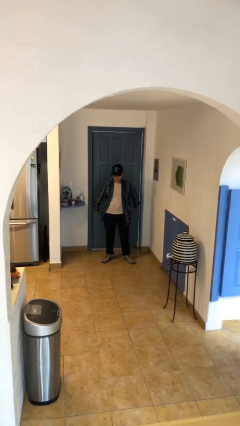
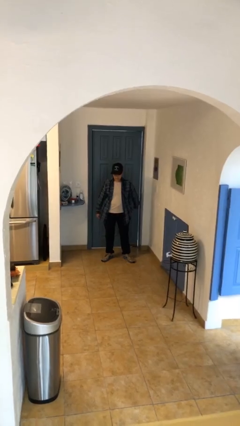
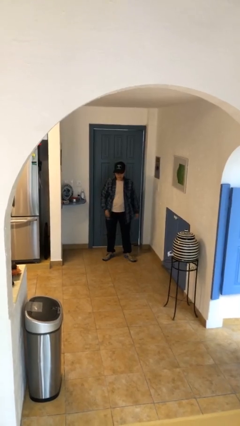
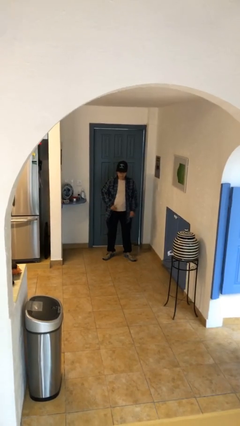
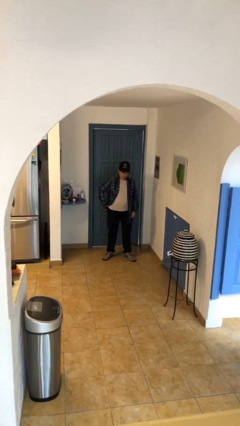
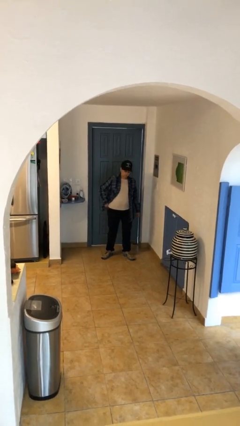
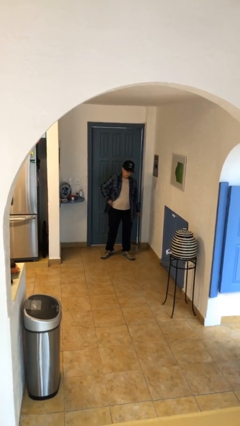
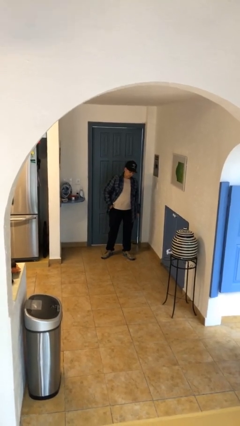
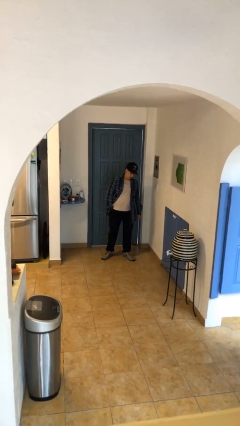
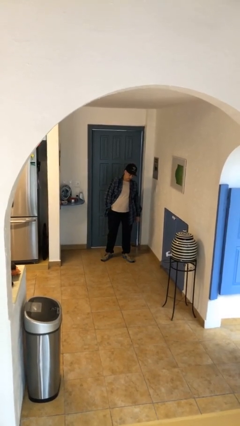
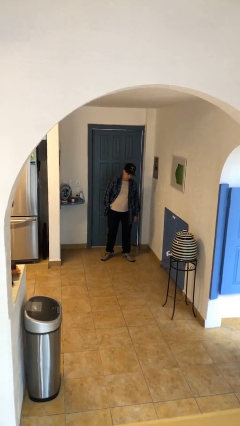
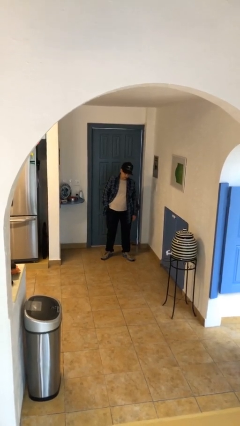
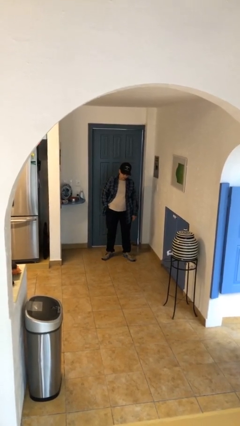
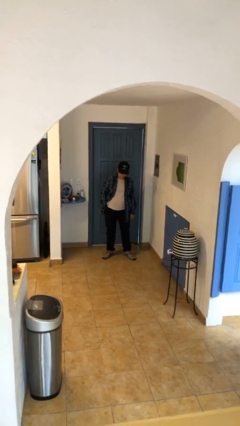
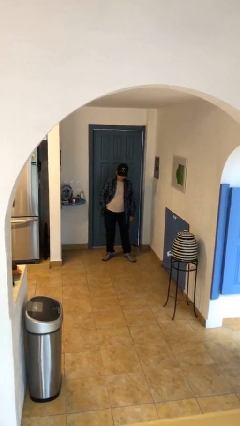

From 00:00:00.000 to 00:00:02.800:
person puts hands in back pockets

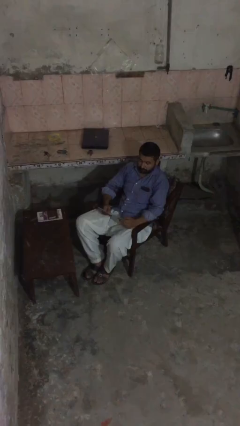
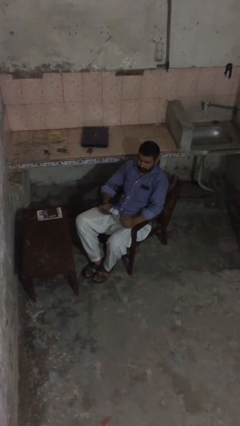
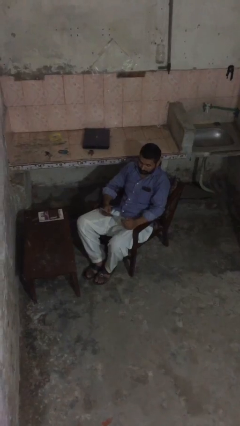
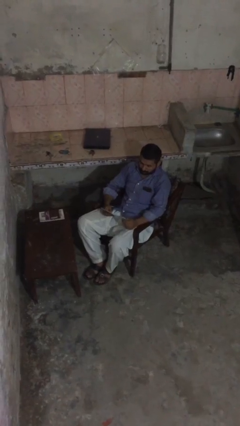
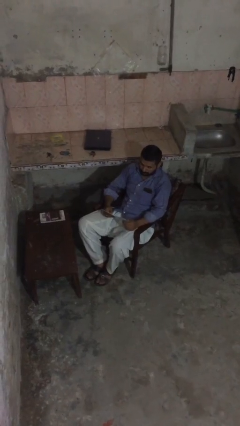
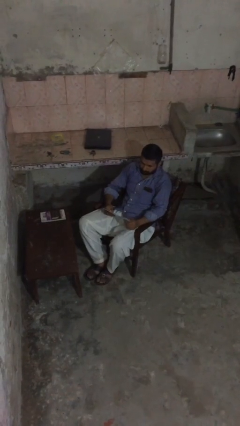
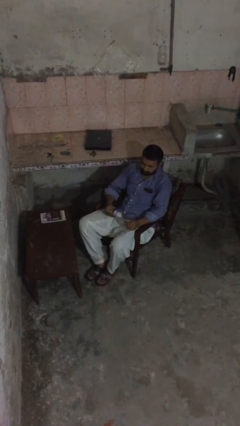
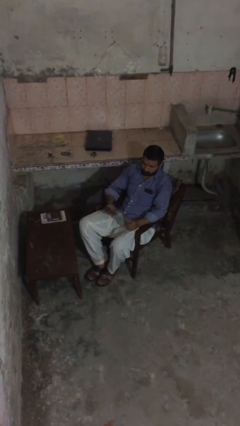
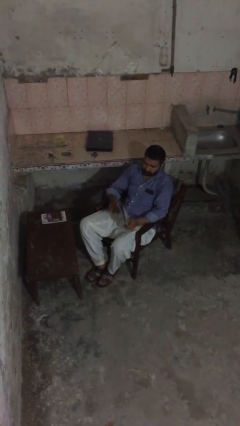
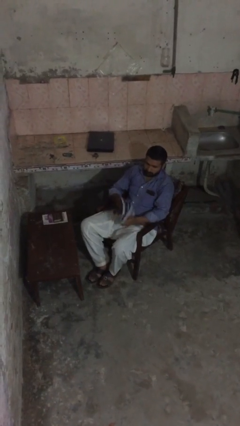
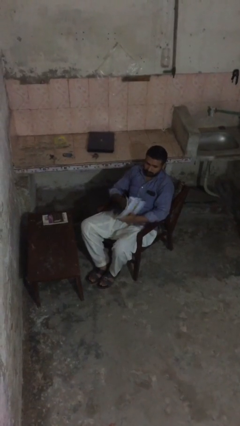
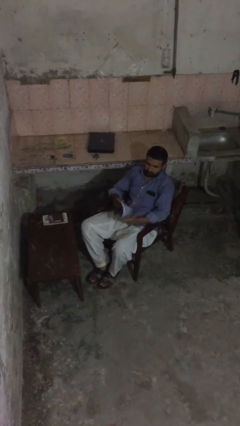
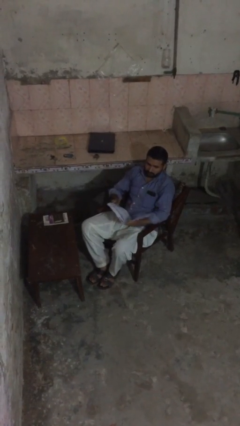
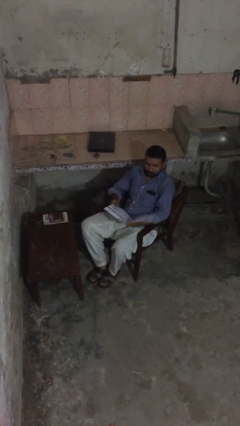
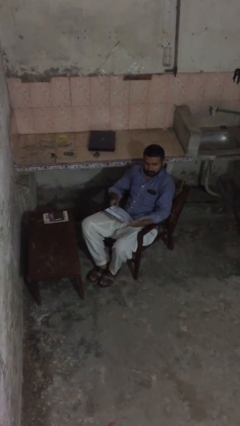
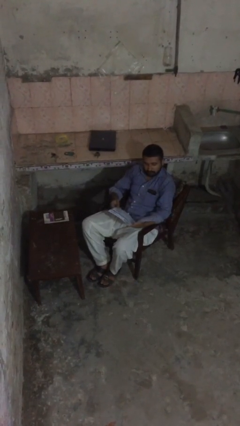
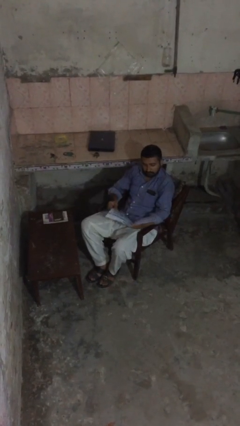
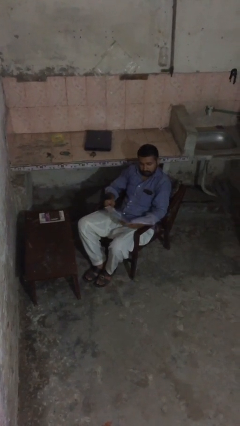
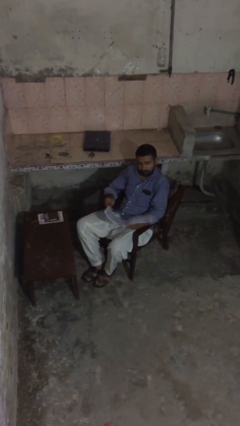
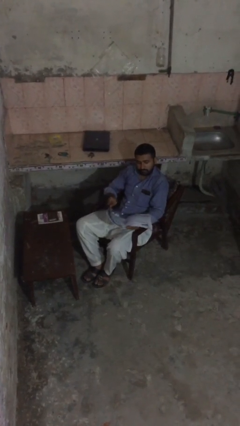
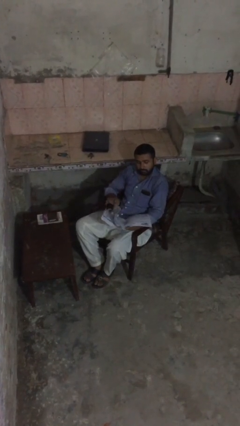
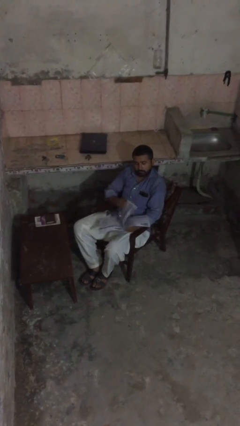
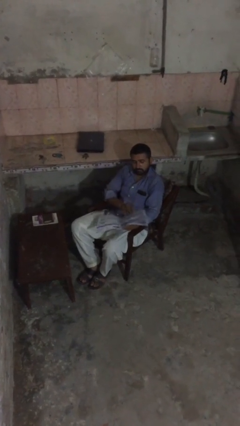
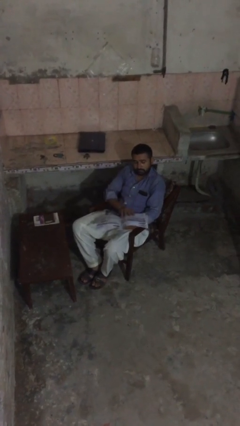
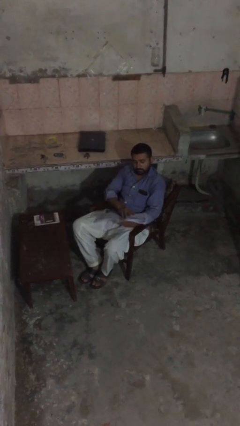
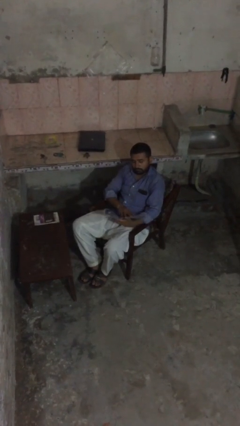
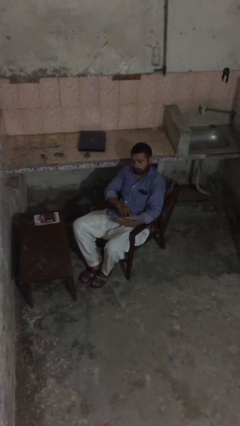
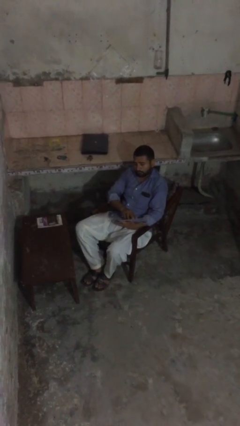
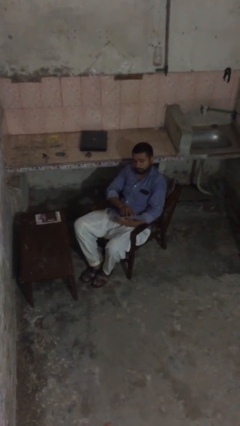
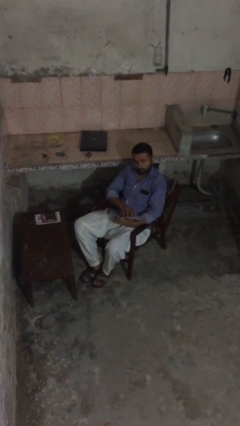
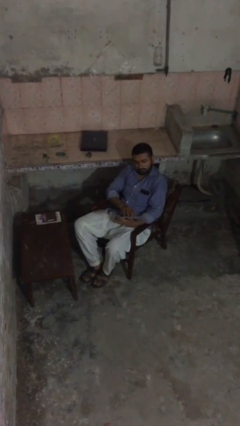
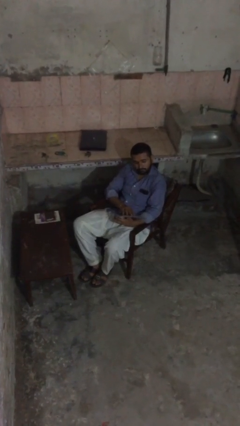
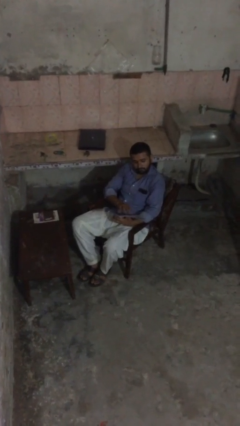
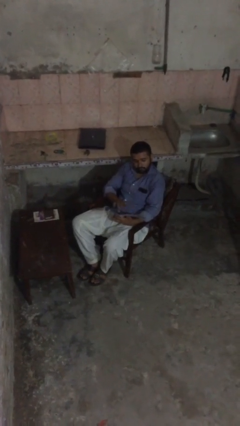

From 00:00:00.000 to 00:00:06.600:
person reads document

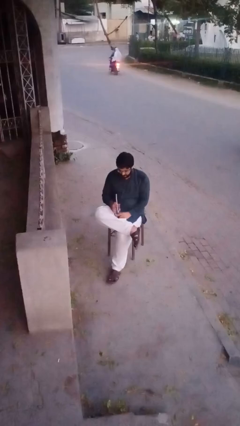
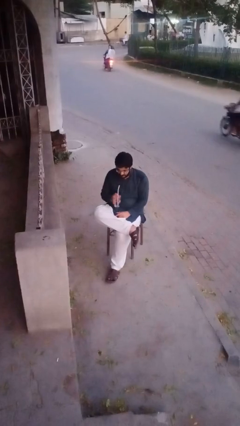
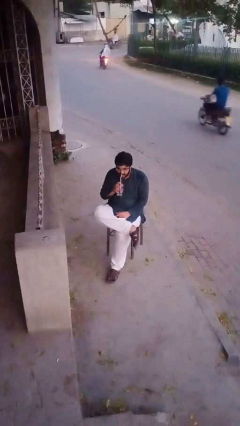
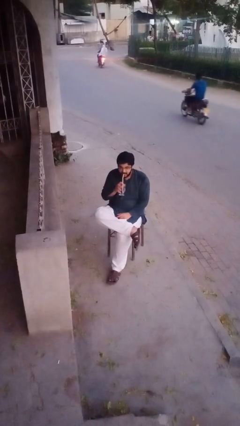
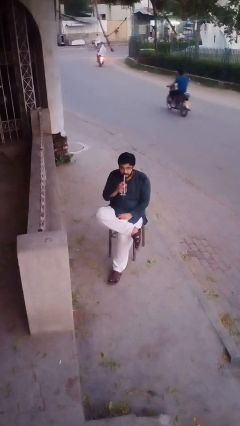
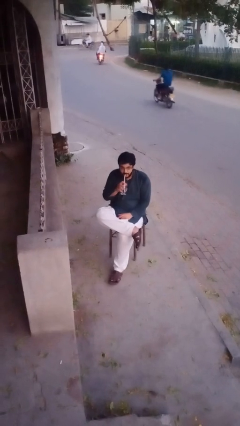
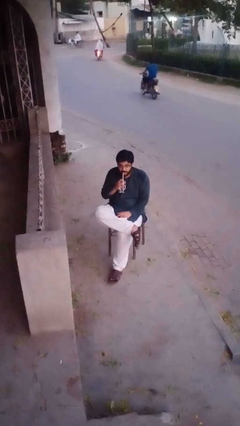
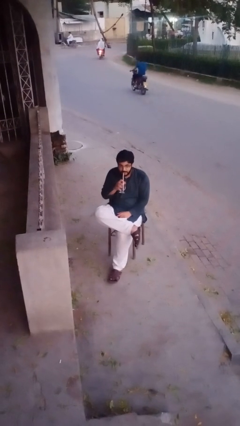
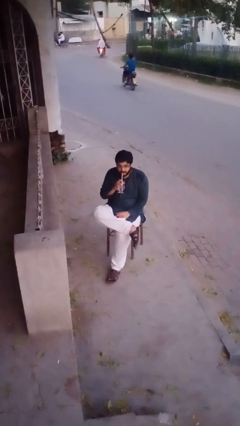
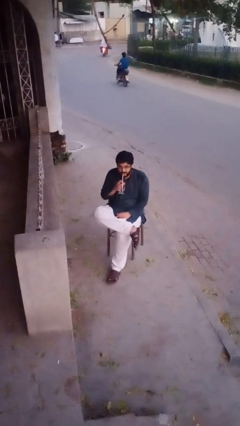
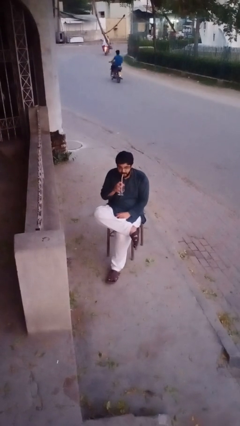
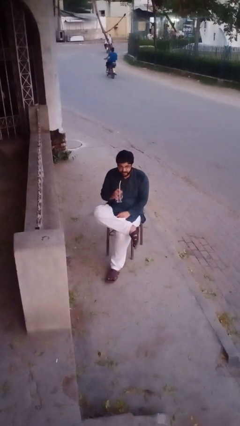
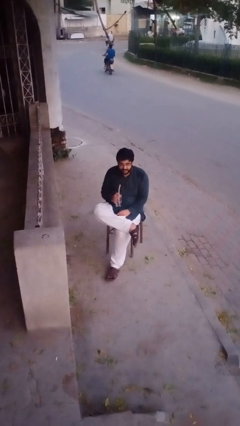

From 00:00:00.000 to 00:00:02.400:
person drinks from straw

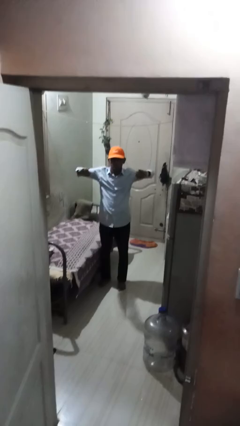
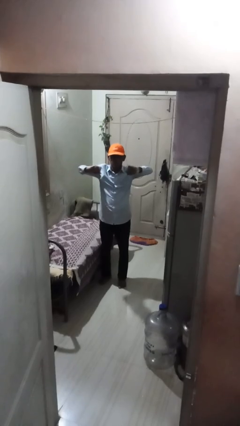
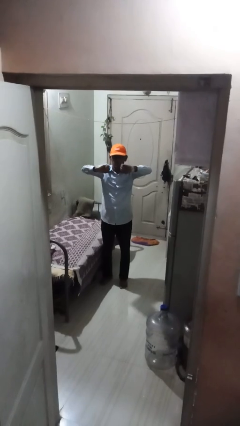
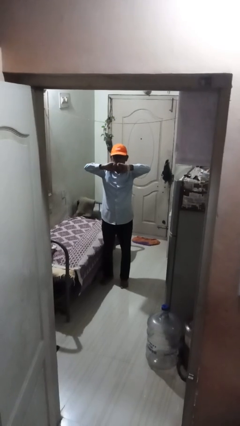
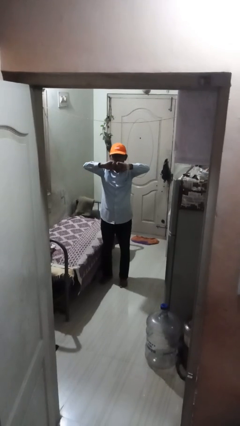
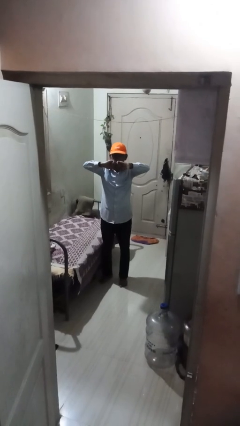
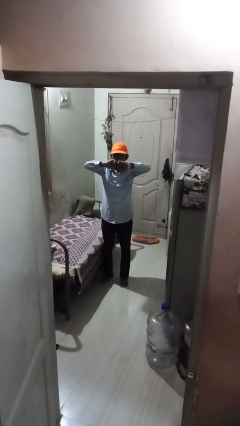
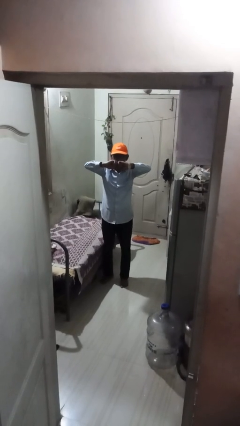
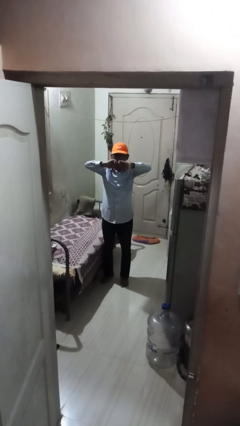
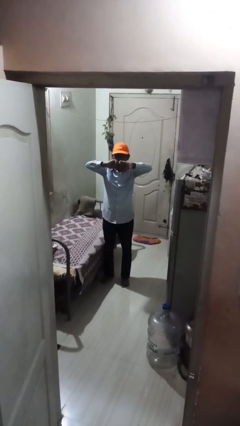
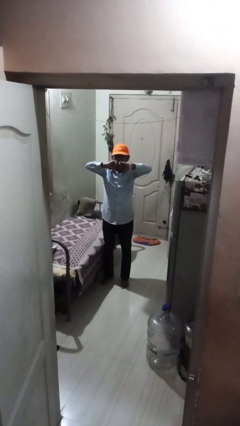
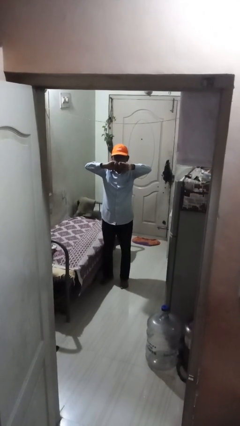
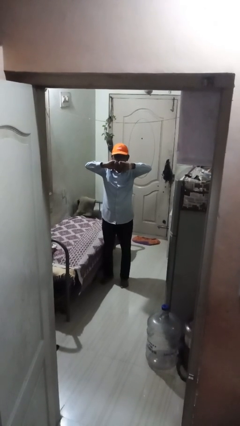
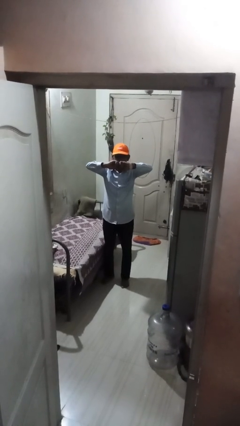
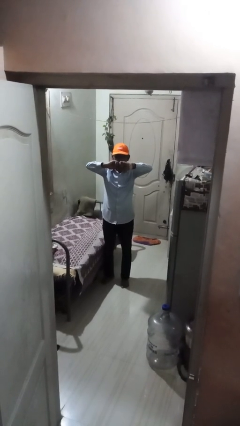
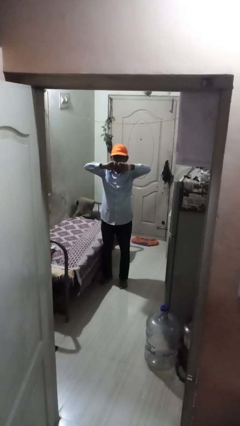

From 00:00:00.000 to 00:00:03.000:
person gestures zoom in

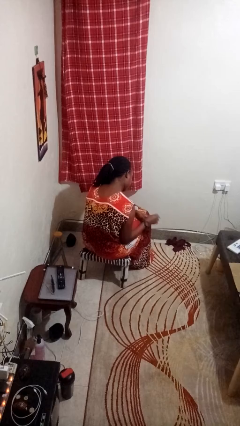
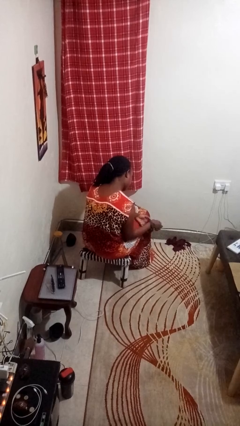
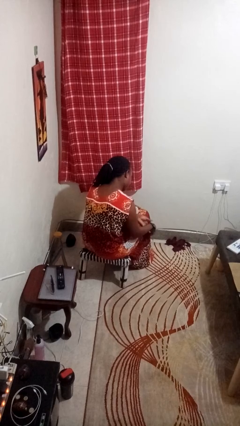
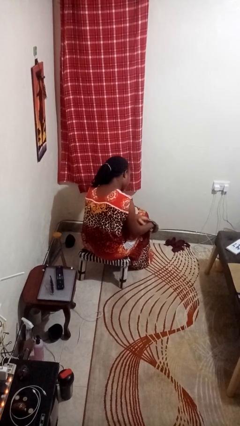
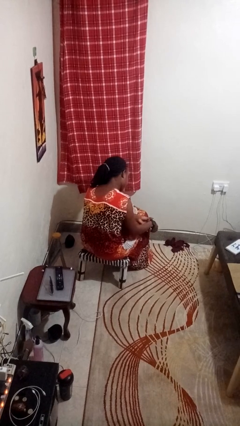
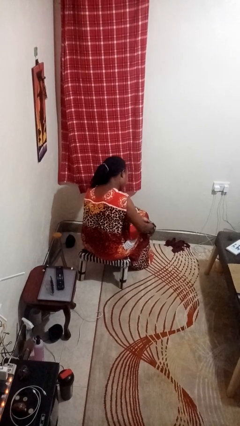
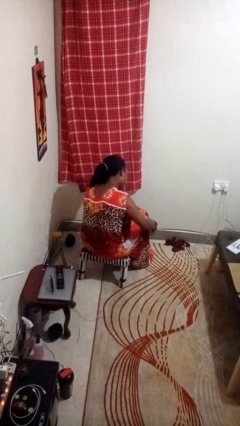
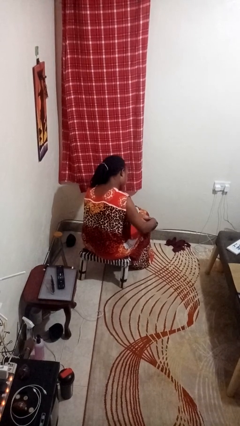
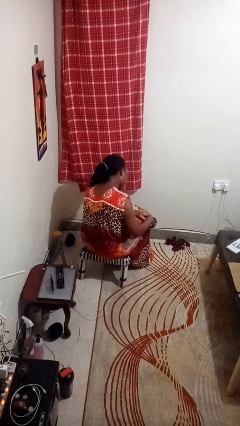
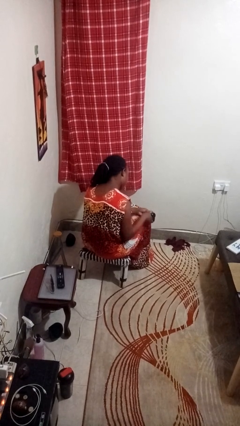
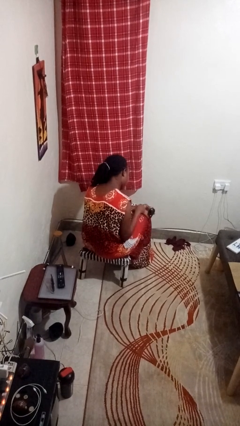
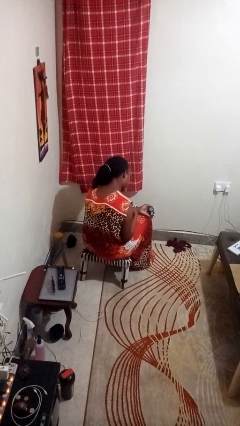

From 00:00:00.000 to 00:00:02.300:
person takes off wristwatch
